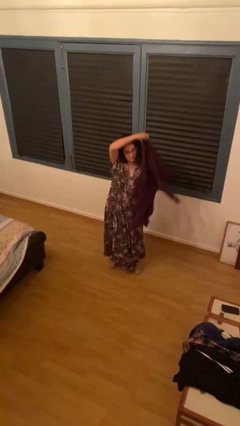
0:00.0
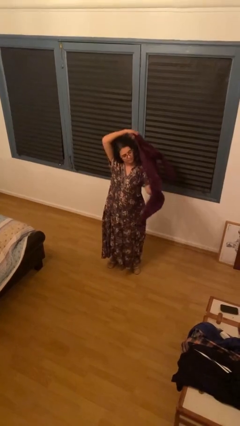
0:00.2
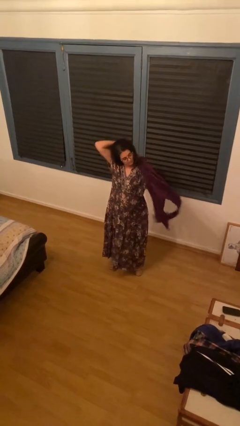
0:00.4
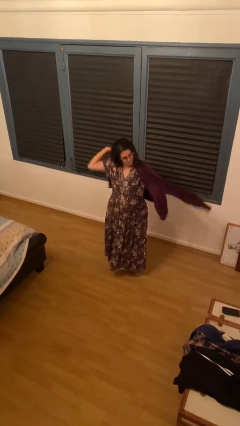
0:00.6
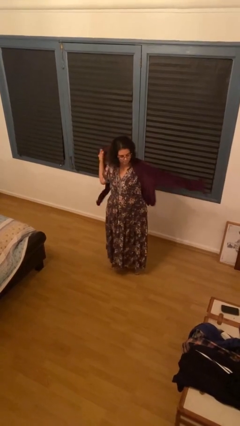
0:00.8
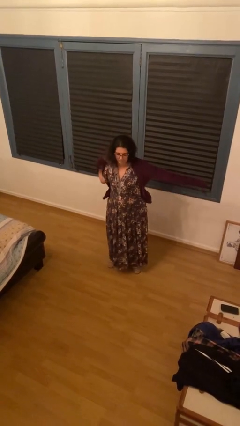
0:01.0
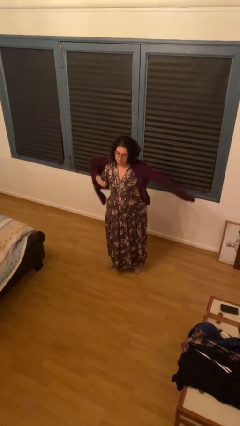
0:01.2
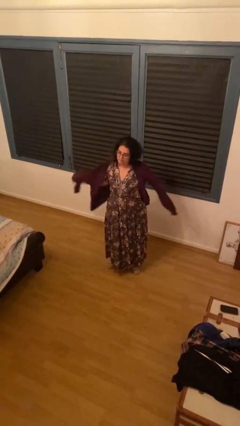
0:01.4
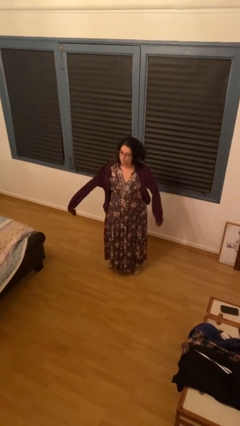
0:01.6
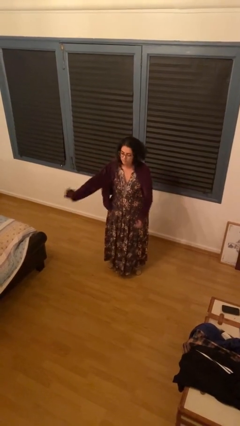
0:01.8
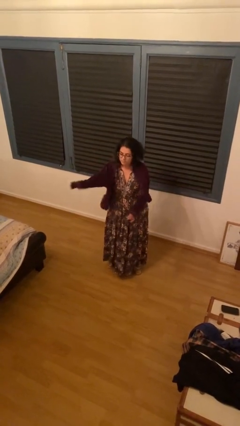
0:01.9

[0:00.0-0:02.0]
person puts on jacket

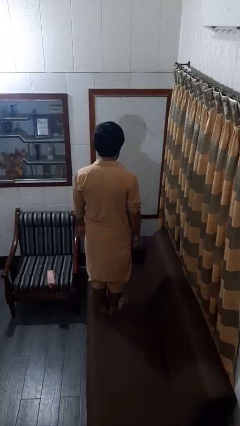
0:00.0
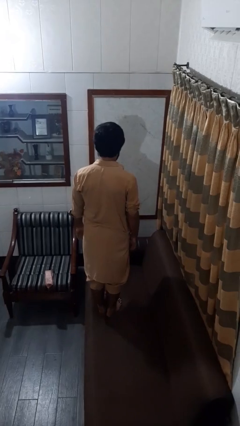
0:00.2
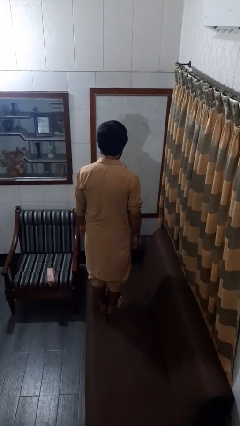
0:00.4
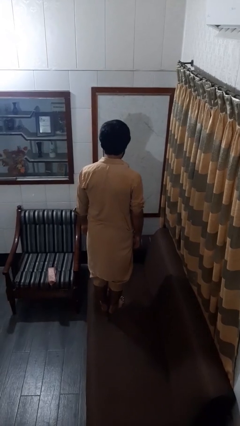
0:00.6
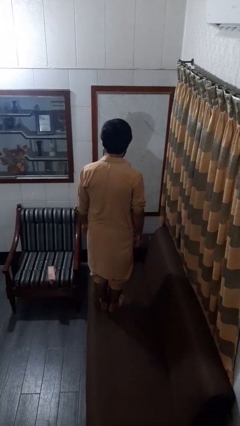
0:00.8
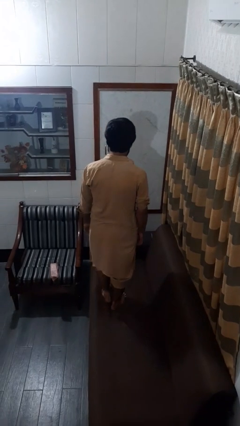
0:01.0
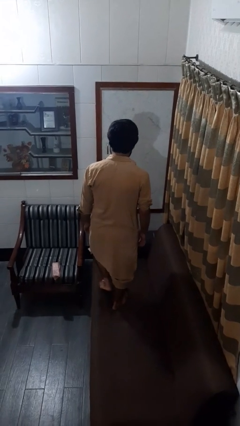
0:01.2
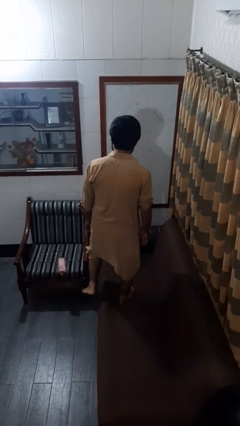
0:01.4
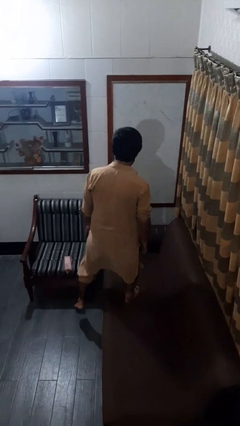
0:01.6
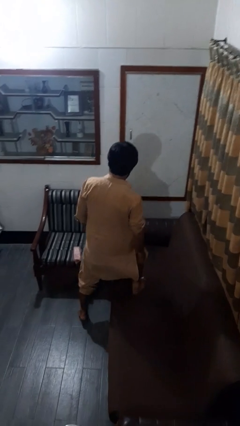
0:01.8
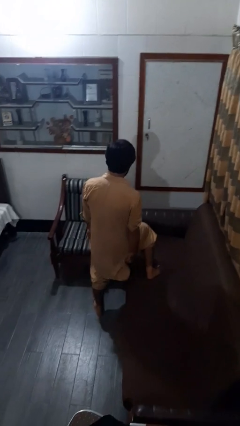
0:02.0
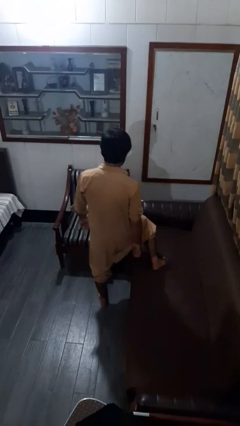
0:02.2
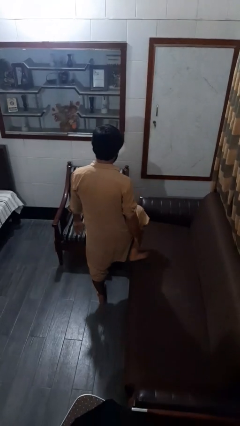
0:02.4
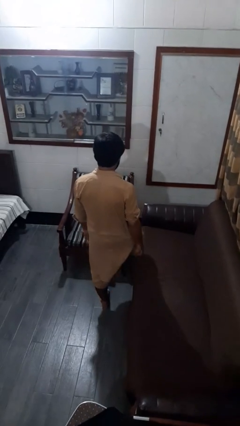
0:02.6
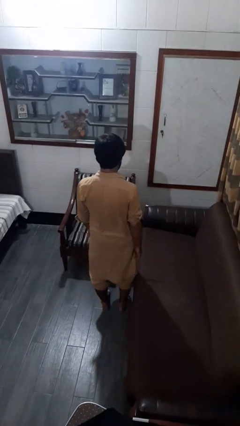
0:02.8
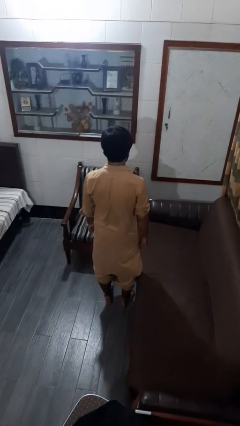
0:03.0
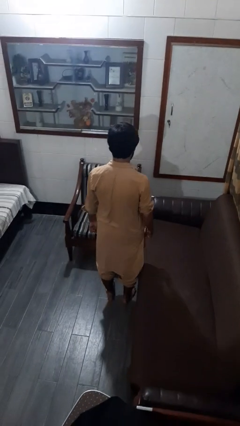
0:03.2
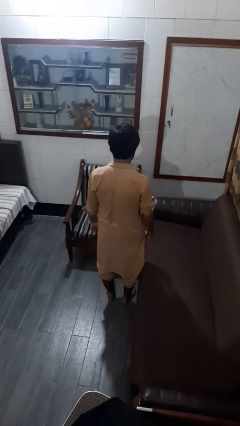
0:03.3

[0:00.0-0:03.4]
person climbs off couch

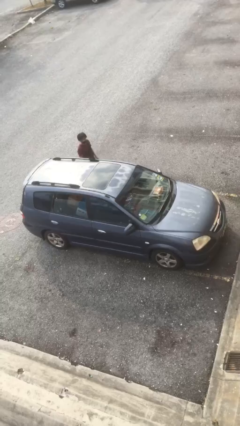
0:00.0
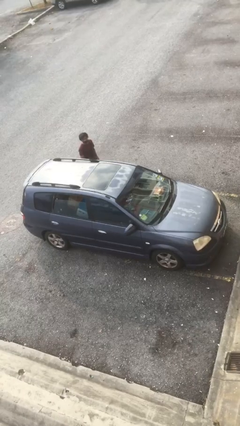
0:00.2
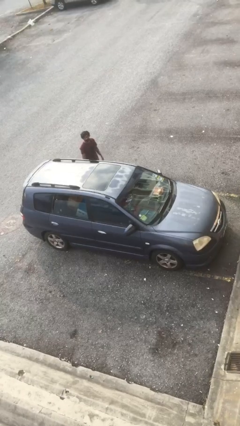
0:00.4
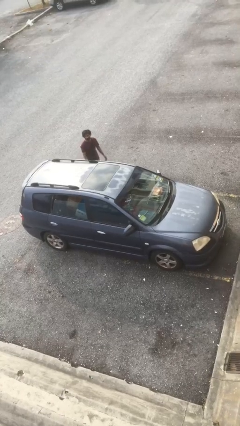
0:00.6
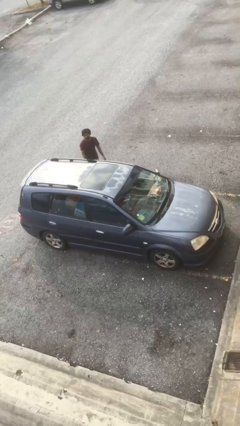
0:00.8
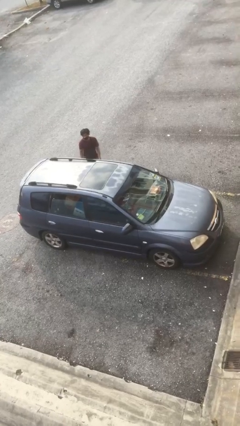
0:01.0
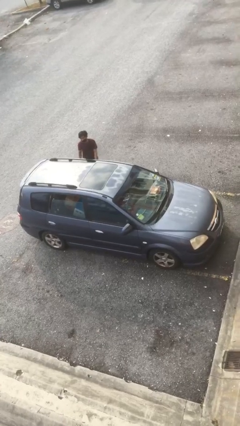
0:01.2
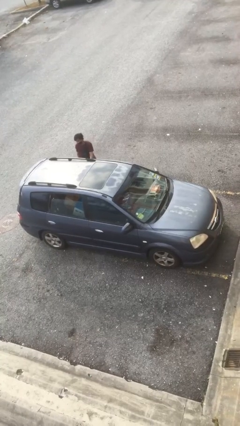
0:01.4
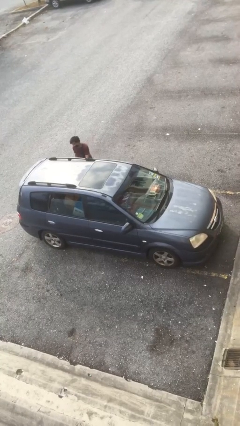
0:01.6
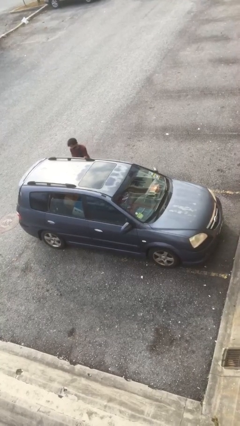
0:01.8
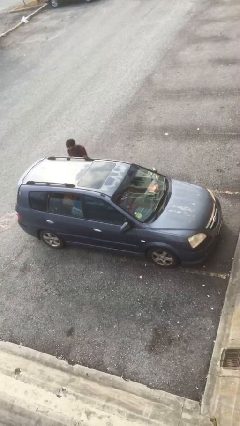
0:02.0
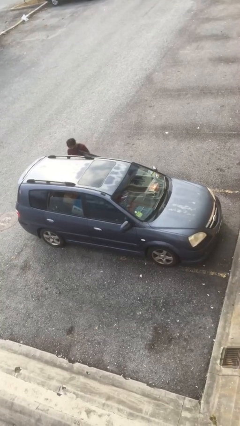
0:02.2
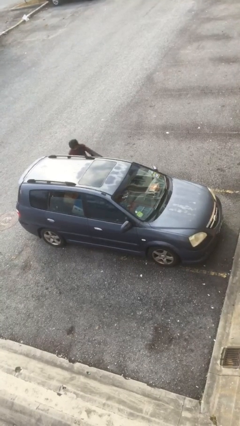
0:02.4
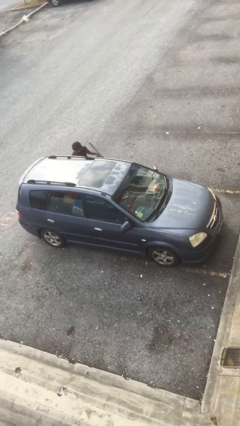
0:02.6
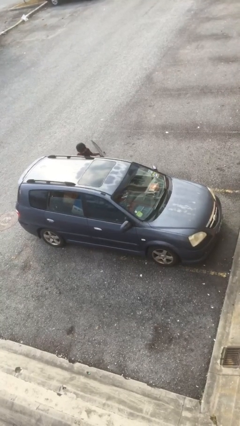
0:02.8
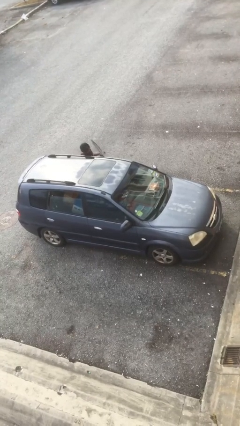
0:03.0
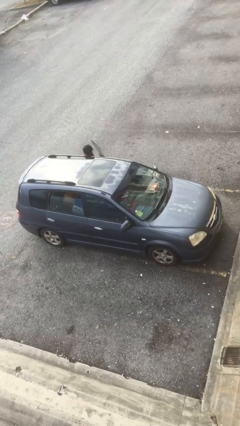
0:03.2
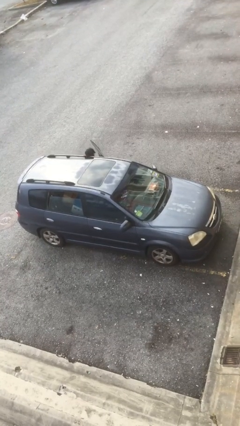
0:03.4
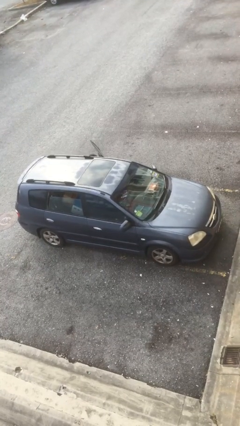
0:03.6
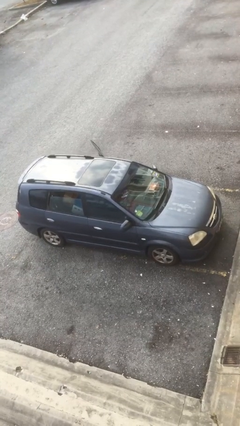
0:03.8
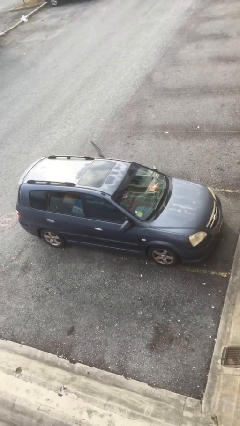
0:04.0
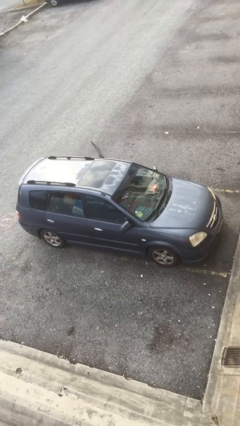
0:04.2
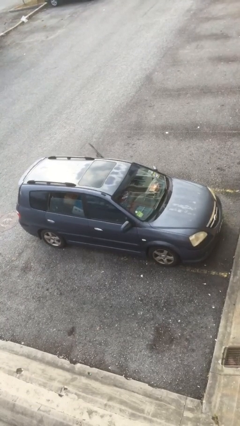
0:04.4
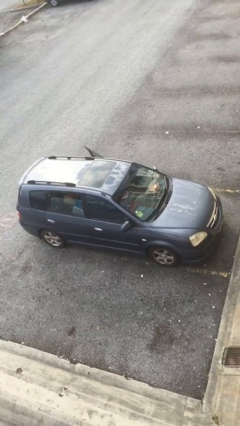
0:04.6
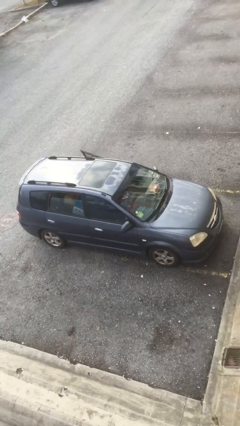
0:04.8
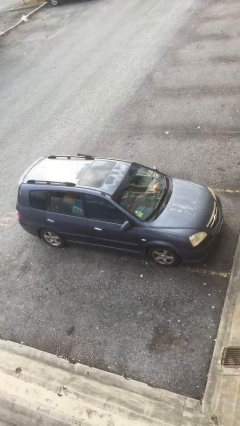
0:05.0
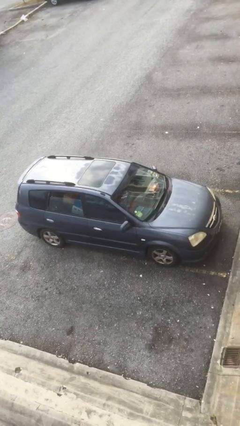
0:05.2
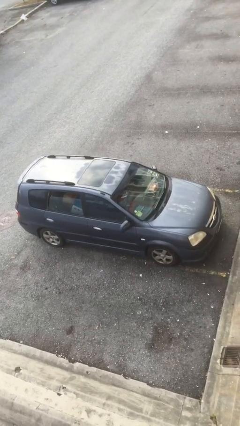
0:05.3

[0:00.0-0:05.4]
car picks up person

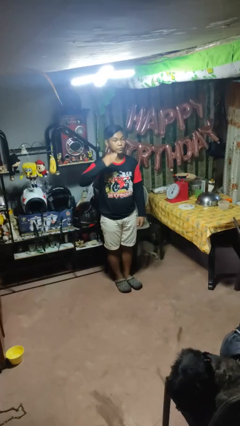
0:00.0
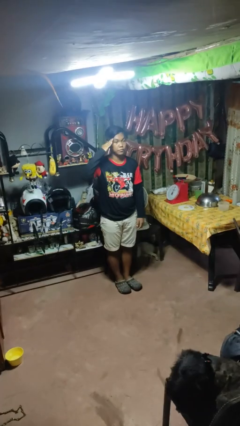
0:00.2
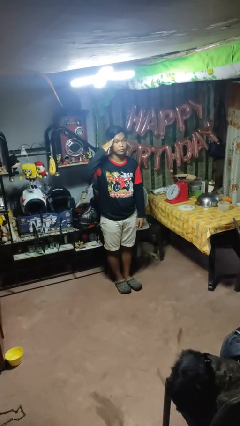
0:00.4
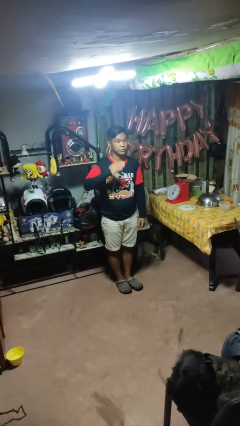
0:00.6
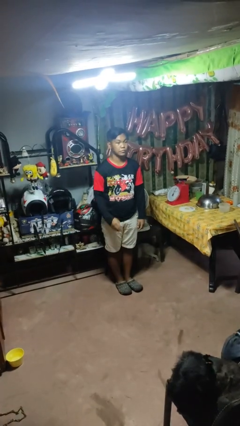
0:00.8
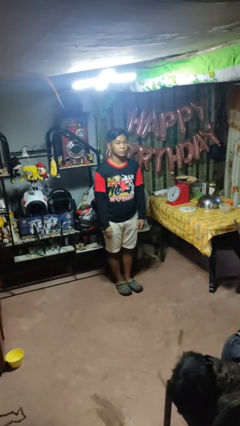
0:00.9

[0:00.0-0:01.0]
person salutes

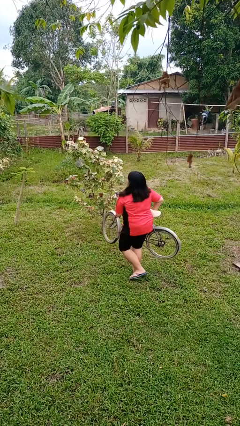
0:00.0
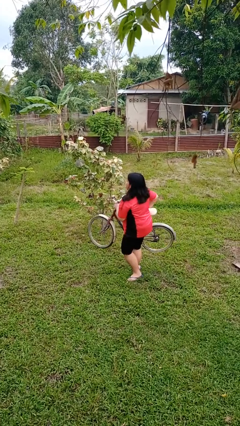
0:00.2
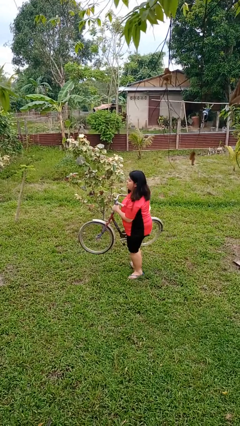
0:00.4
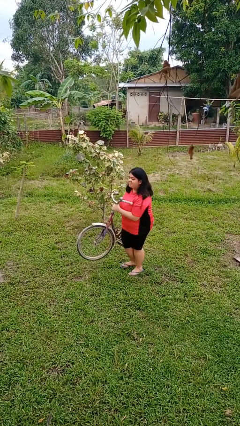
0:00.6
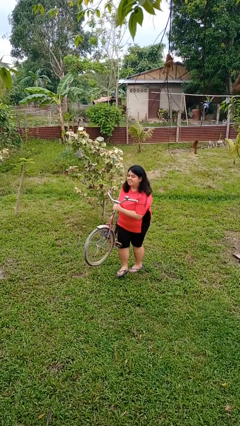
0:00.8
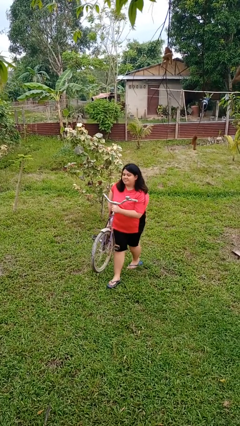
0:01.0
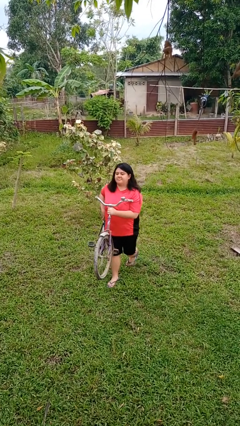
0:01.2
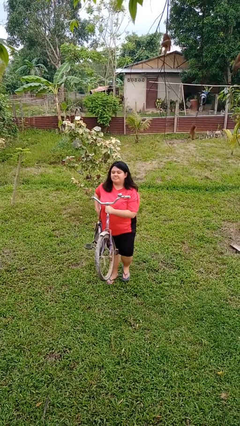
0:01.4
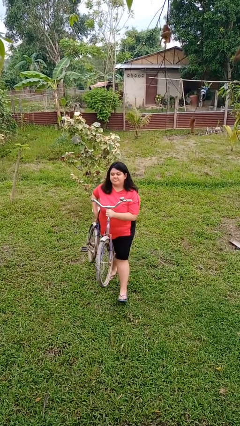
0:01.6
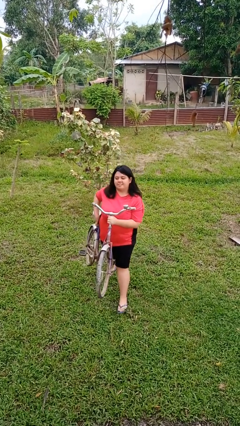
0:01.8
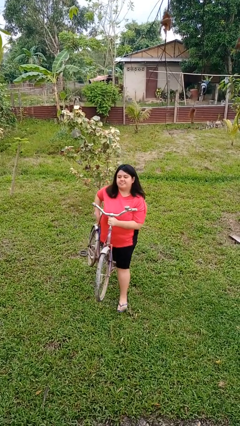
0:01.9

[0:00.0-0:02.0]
person carries bicycle

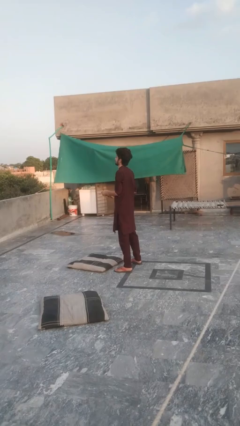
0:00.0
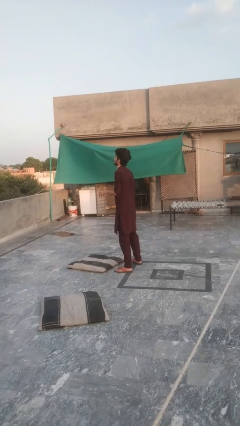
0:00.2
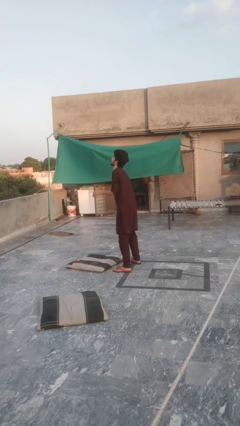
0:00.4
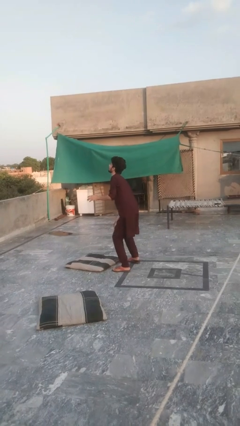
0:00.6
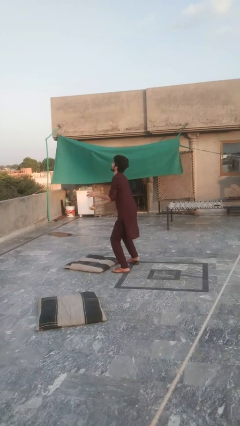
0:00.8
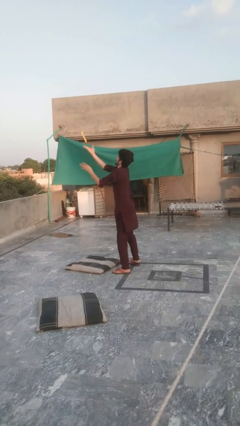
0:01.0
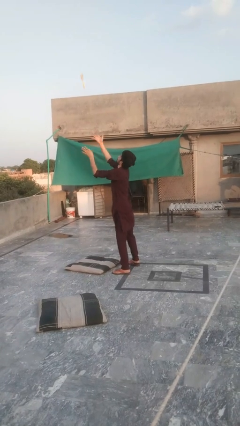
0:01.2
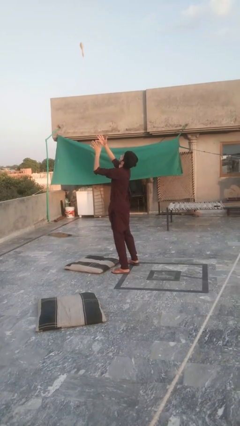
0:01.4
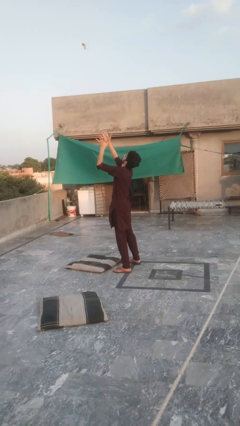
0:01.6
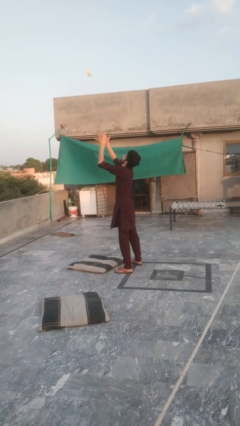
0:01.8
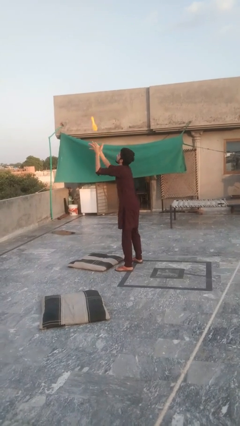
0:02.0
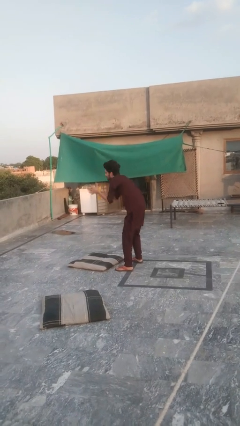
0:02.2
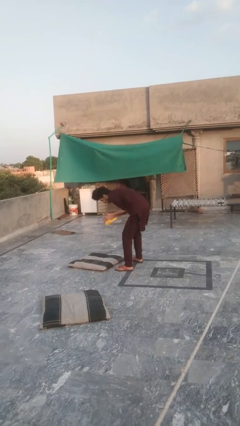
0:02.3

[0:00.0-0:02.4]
person drops object

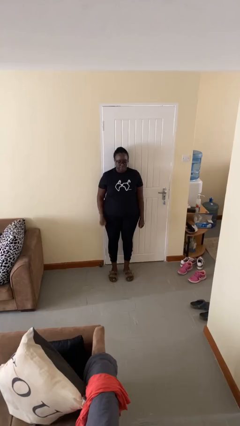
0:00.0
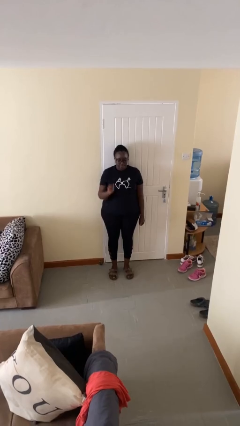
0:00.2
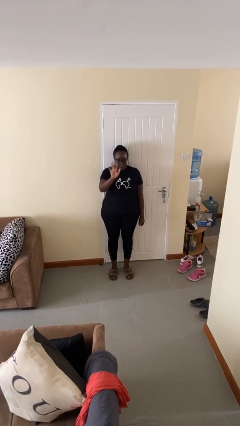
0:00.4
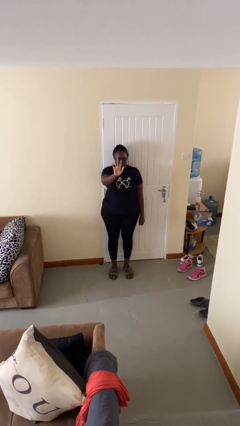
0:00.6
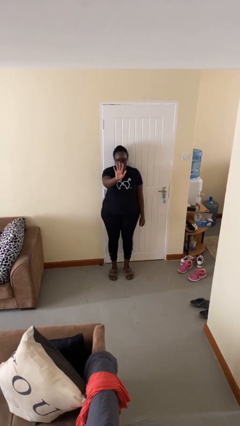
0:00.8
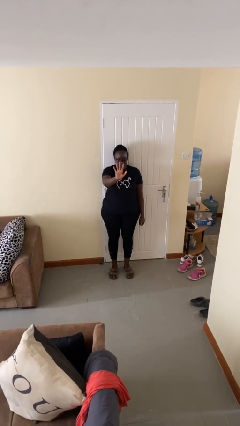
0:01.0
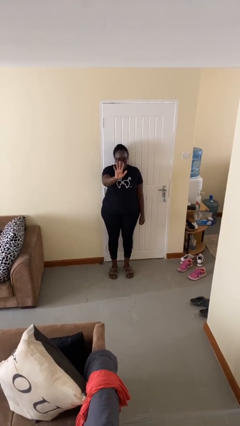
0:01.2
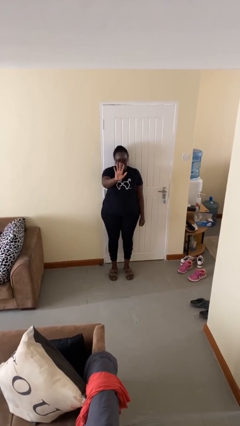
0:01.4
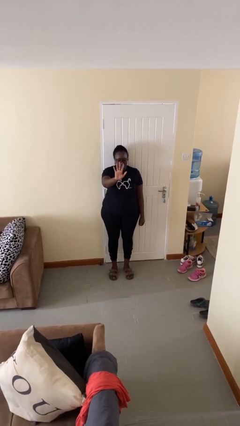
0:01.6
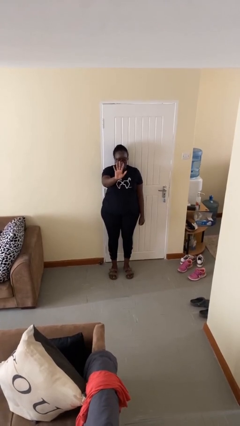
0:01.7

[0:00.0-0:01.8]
person gestures number five
